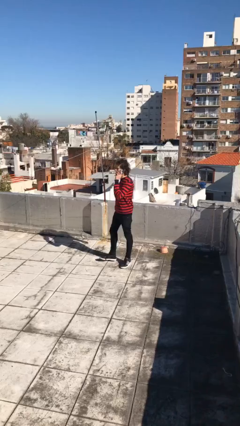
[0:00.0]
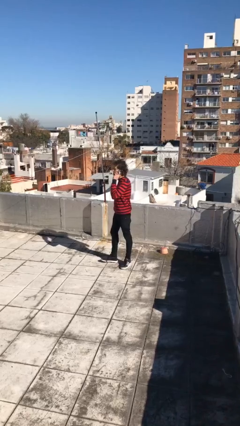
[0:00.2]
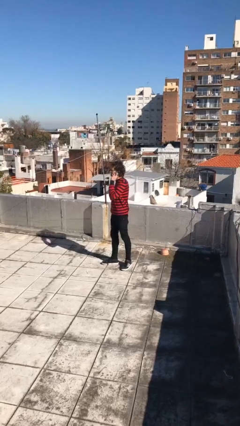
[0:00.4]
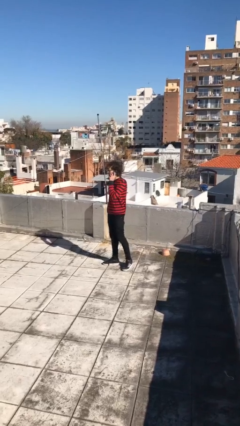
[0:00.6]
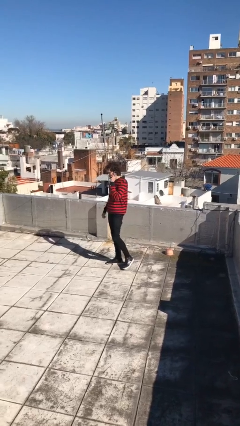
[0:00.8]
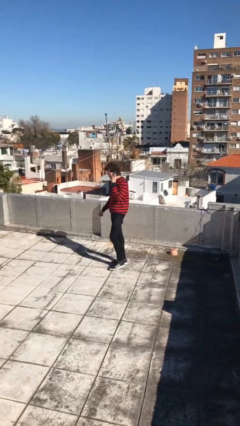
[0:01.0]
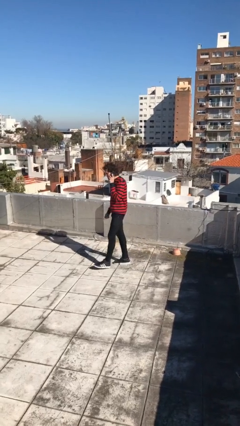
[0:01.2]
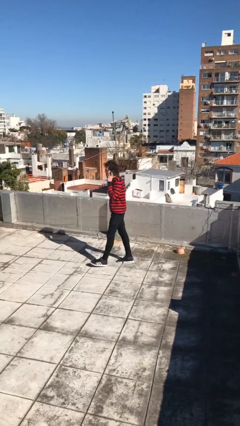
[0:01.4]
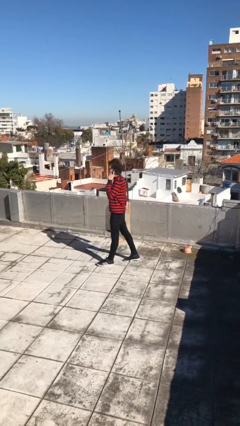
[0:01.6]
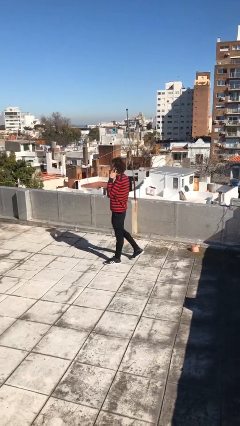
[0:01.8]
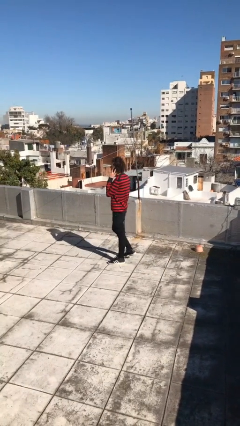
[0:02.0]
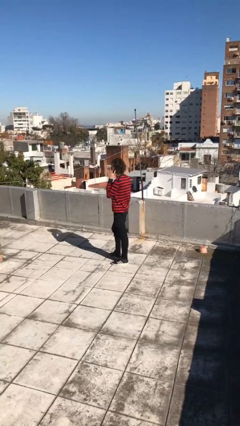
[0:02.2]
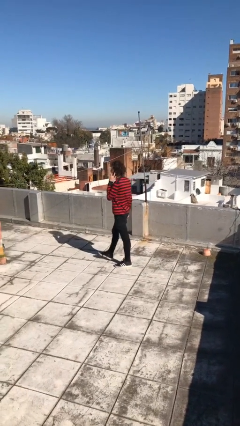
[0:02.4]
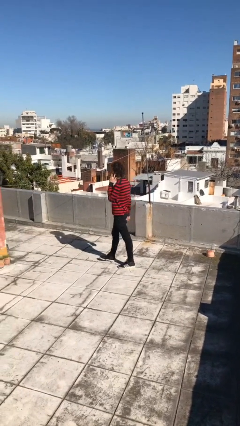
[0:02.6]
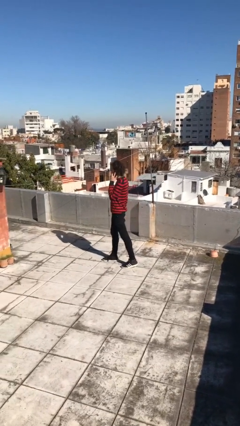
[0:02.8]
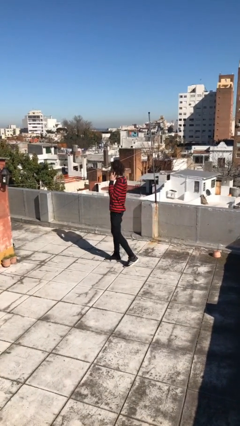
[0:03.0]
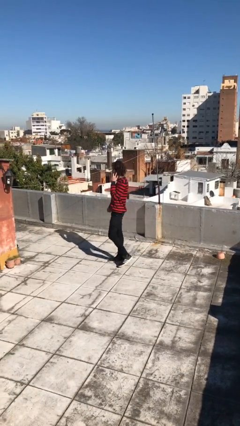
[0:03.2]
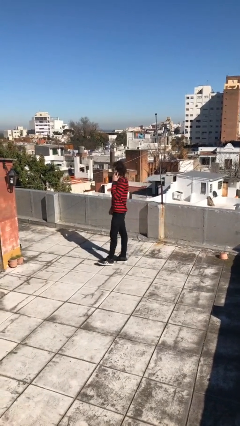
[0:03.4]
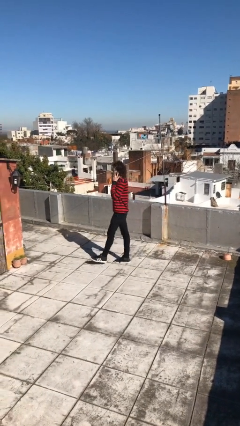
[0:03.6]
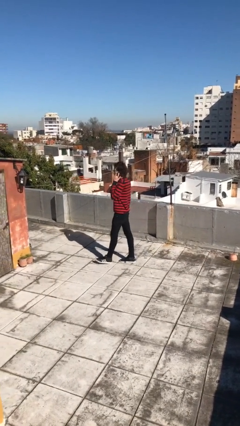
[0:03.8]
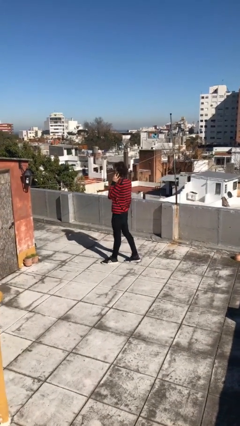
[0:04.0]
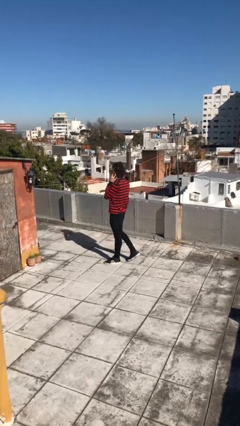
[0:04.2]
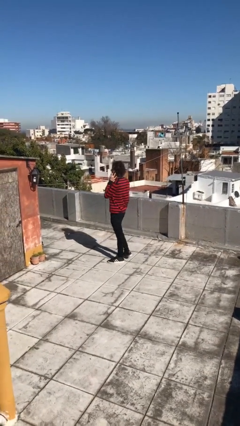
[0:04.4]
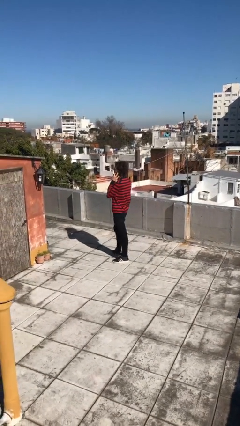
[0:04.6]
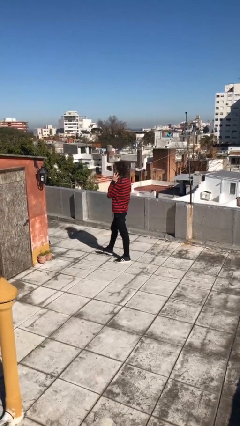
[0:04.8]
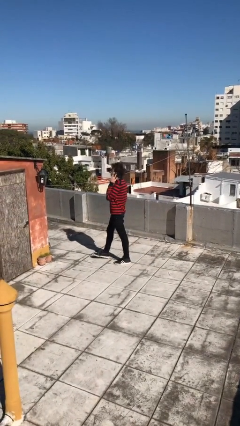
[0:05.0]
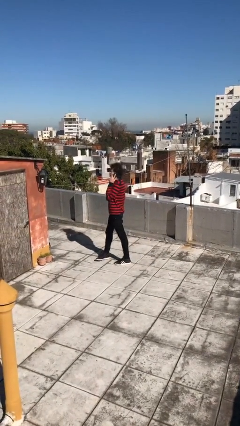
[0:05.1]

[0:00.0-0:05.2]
person talks on phone

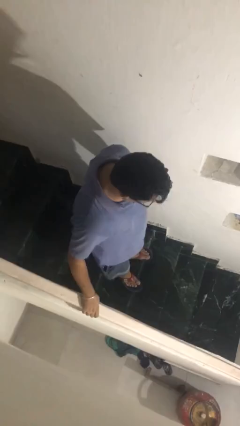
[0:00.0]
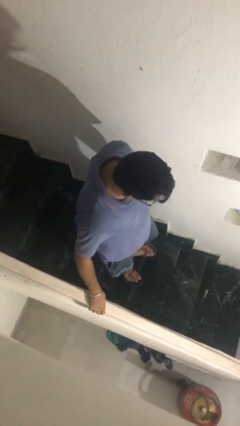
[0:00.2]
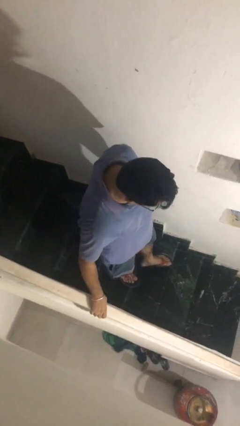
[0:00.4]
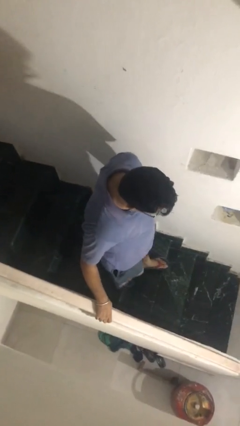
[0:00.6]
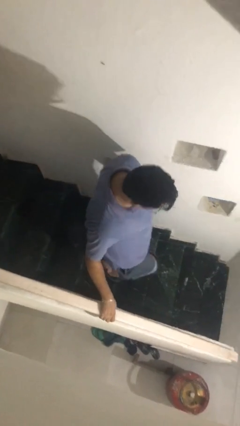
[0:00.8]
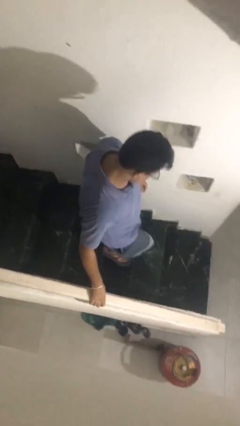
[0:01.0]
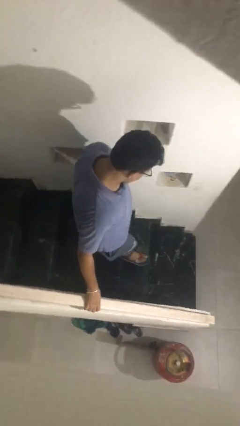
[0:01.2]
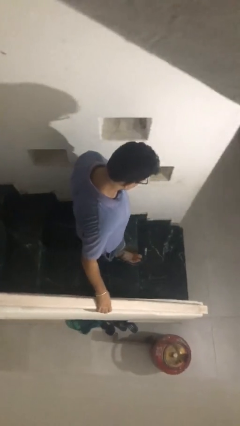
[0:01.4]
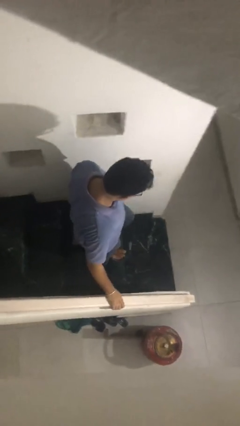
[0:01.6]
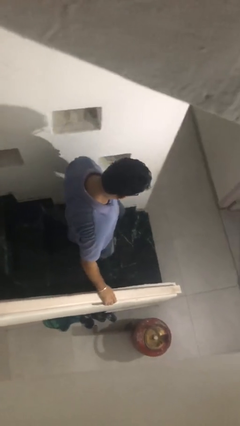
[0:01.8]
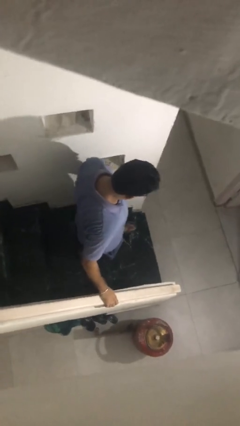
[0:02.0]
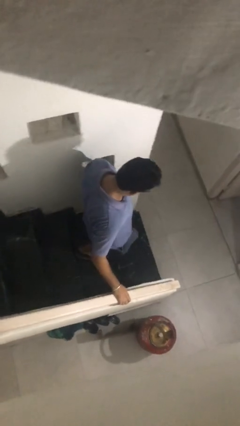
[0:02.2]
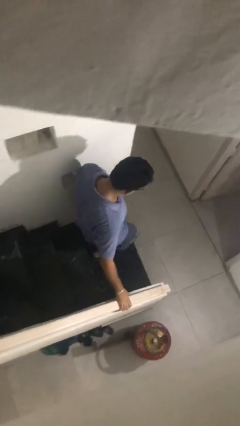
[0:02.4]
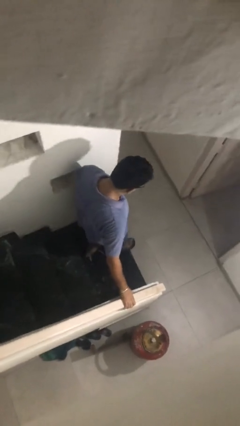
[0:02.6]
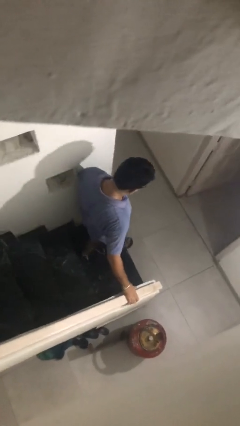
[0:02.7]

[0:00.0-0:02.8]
person climbs down stairs

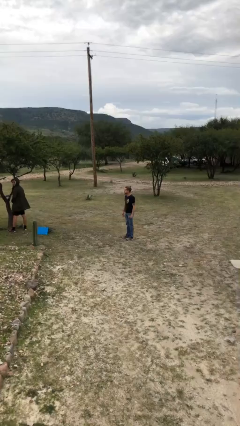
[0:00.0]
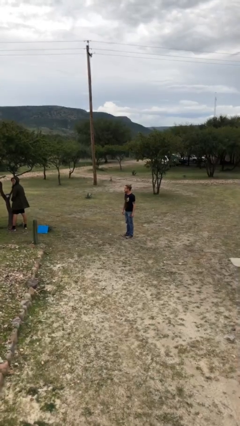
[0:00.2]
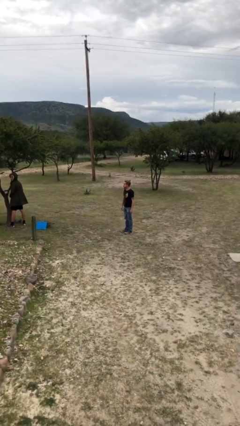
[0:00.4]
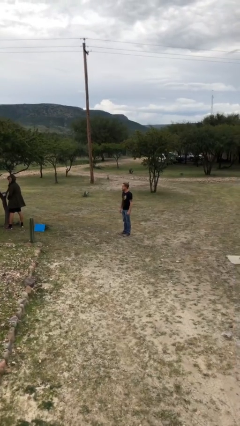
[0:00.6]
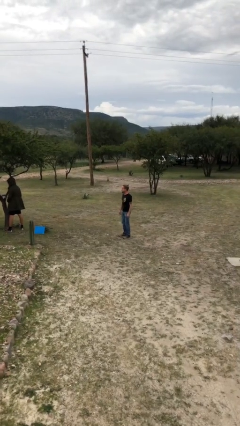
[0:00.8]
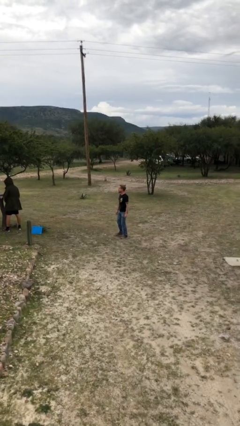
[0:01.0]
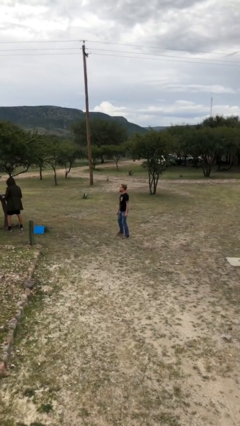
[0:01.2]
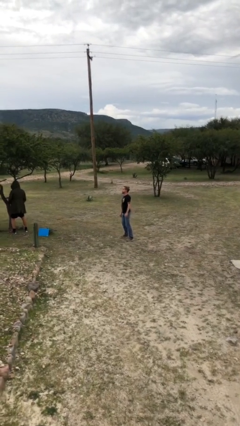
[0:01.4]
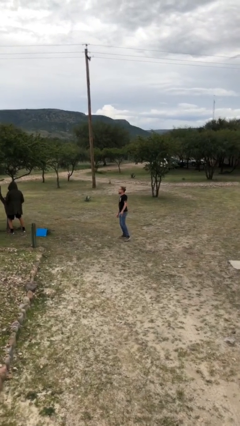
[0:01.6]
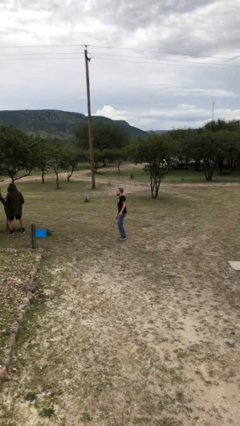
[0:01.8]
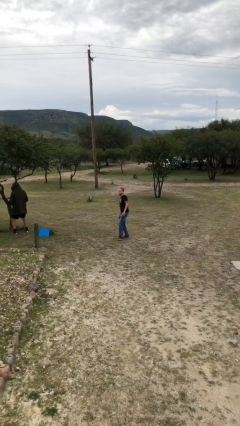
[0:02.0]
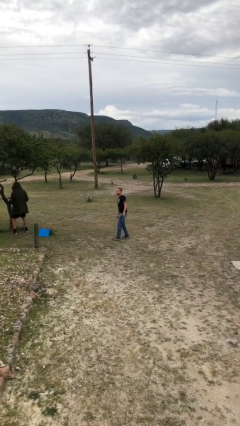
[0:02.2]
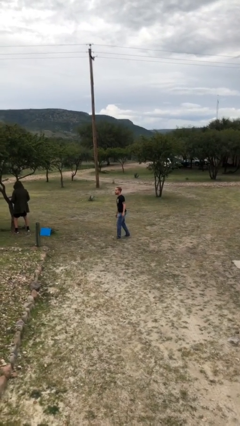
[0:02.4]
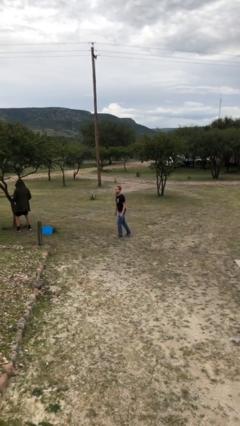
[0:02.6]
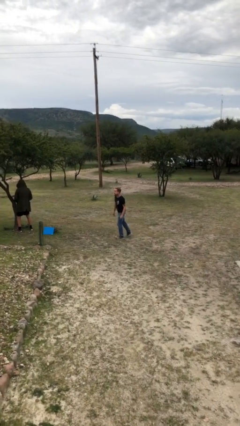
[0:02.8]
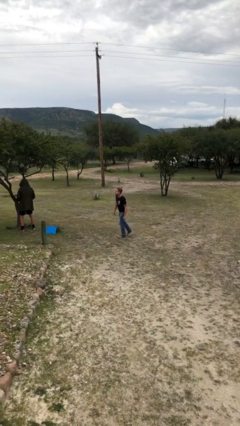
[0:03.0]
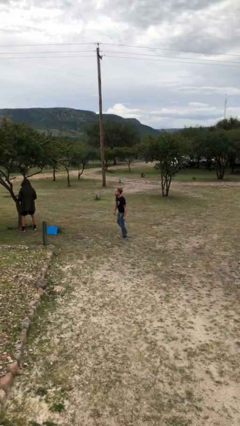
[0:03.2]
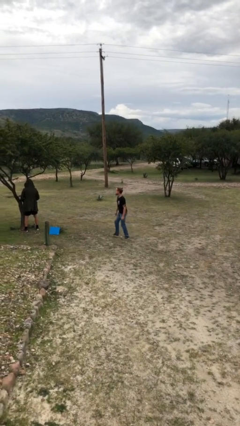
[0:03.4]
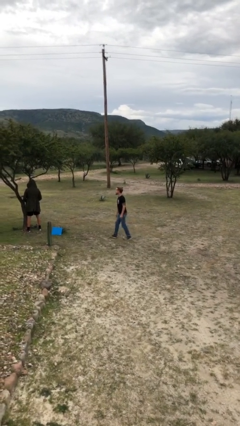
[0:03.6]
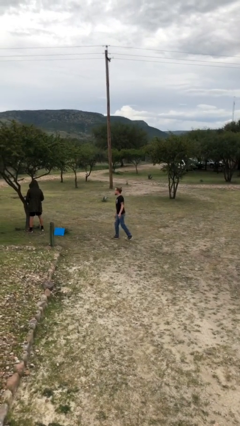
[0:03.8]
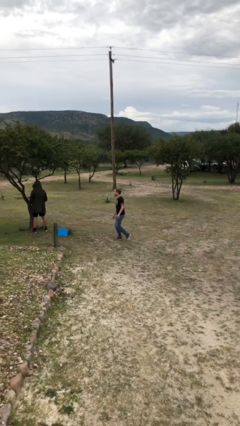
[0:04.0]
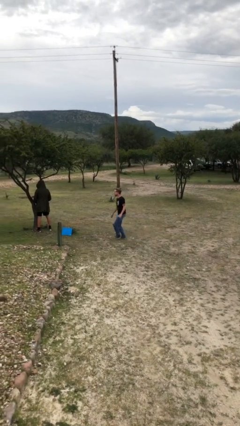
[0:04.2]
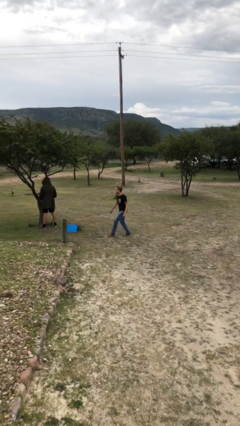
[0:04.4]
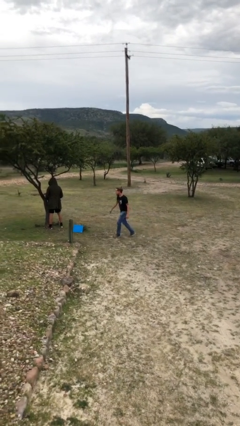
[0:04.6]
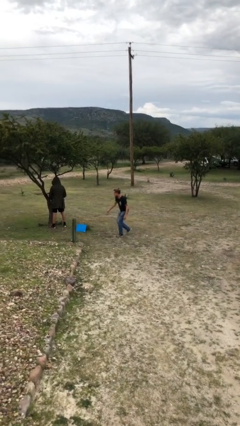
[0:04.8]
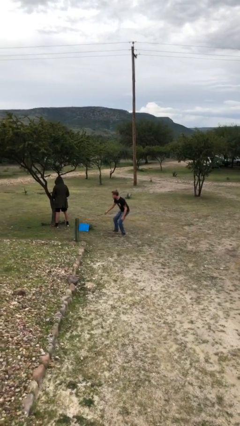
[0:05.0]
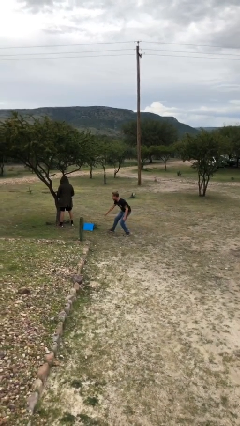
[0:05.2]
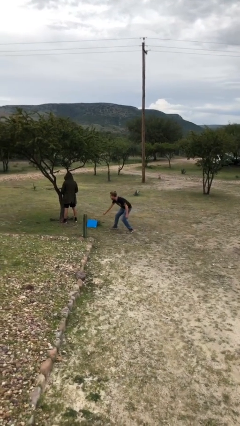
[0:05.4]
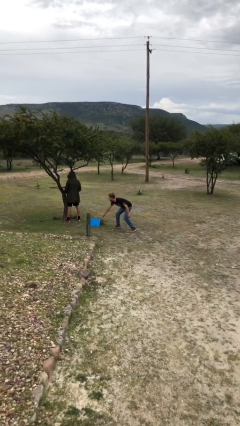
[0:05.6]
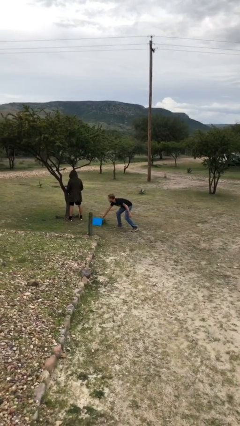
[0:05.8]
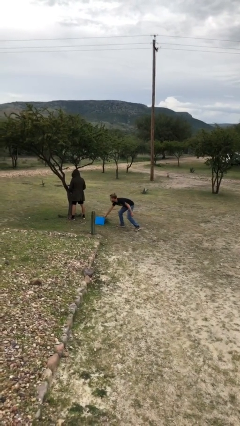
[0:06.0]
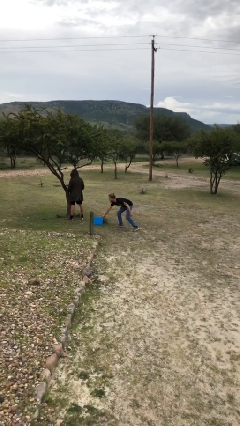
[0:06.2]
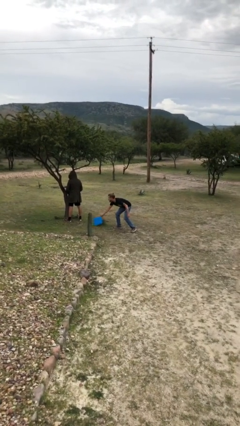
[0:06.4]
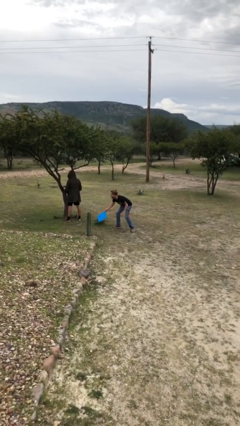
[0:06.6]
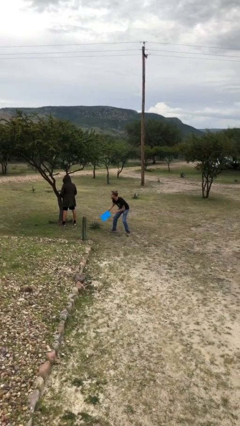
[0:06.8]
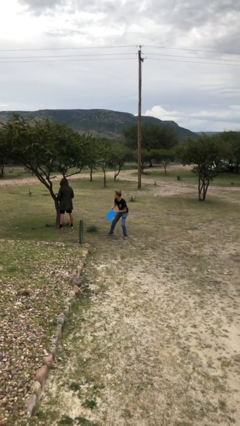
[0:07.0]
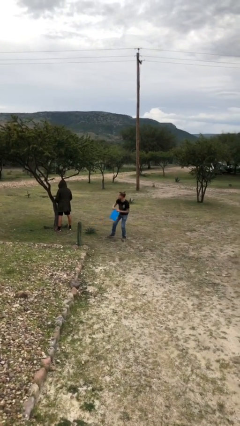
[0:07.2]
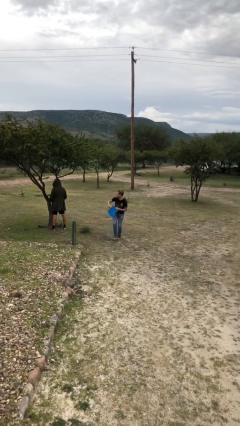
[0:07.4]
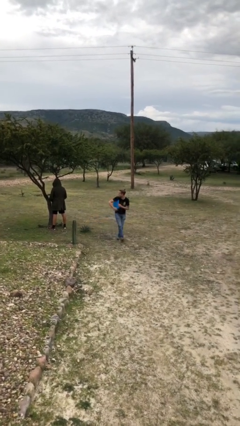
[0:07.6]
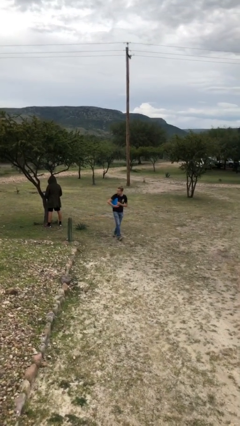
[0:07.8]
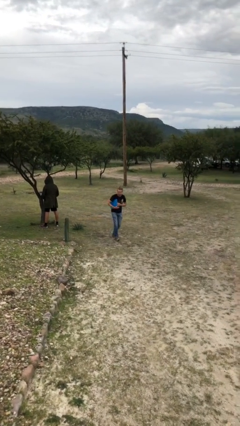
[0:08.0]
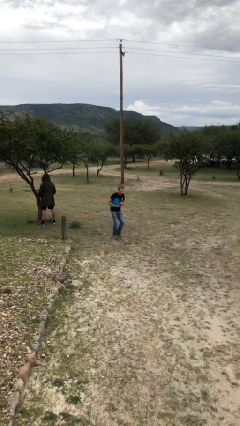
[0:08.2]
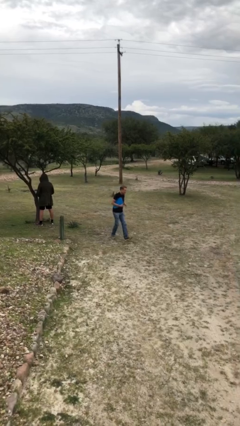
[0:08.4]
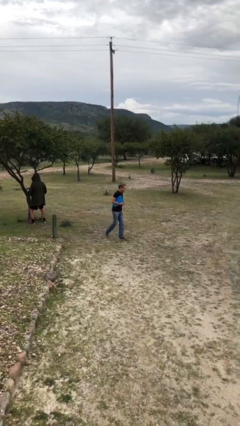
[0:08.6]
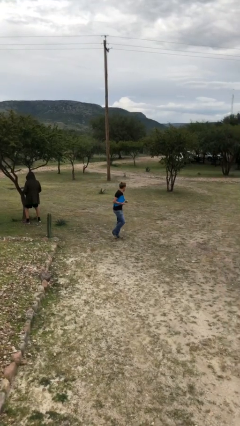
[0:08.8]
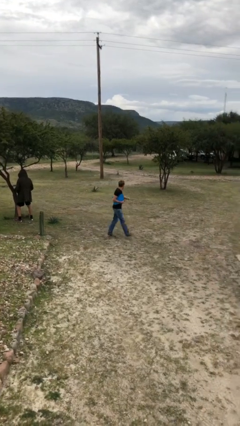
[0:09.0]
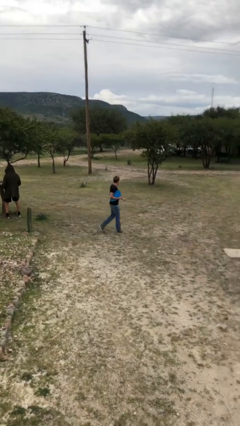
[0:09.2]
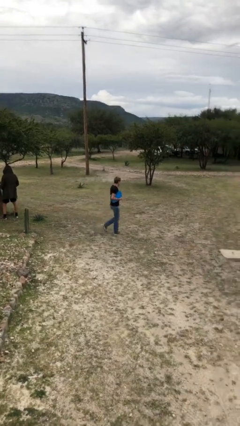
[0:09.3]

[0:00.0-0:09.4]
person steals object from person

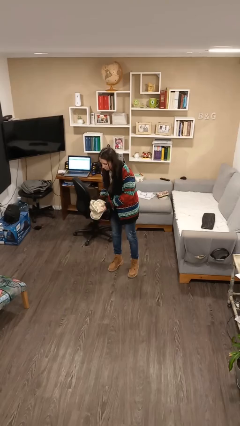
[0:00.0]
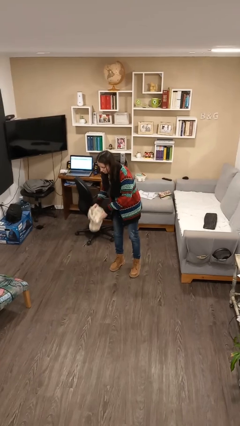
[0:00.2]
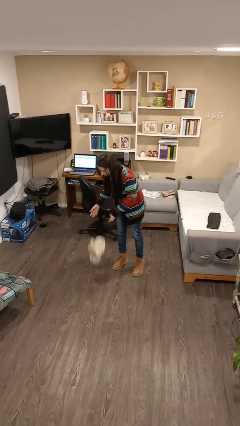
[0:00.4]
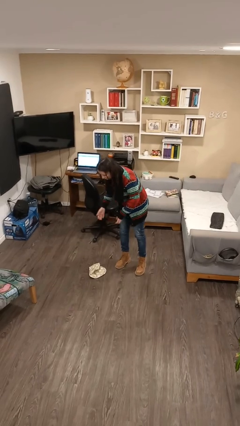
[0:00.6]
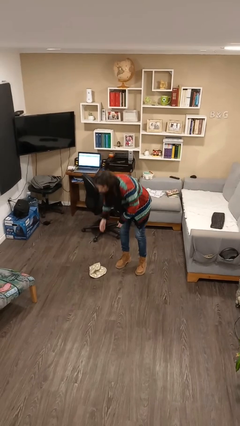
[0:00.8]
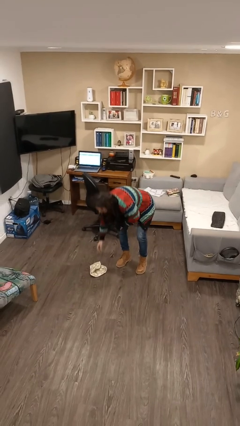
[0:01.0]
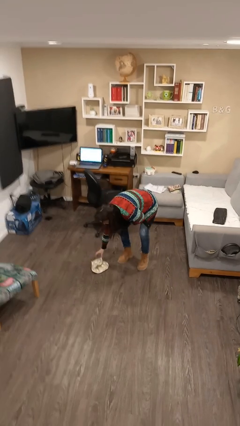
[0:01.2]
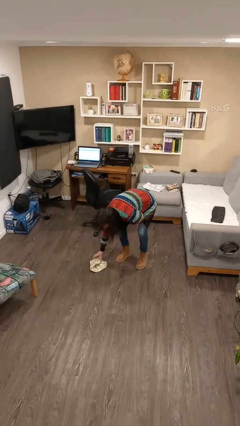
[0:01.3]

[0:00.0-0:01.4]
person drops object
